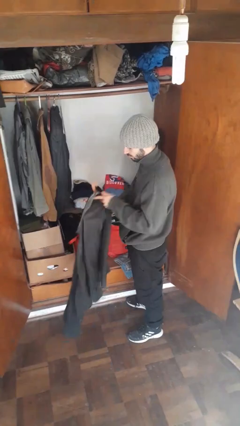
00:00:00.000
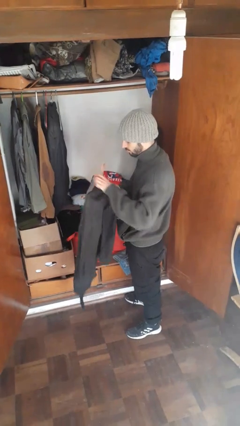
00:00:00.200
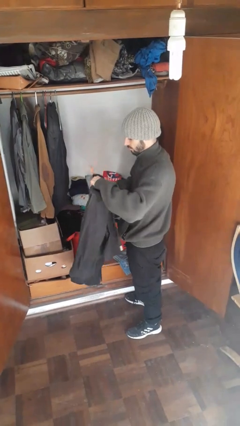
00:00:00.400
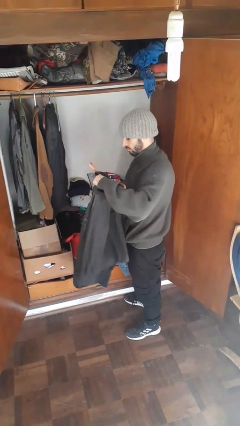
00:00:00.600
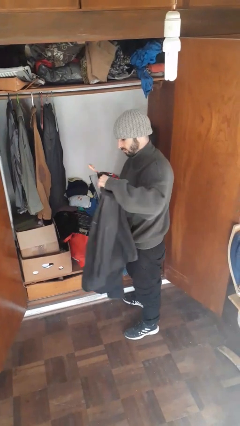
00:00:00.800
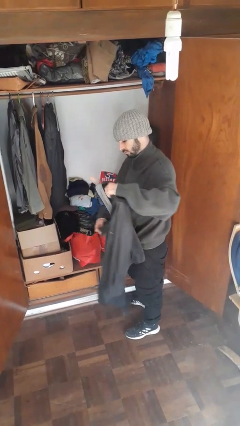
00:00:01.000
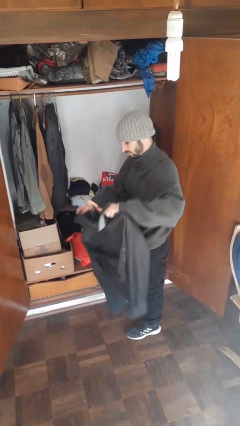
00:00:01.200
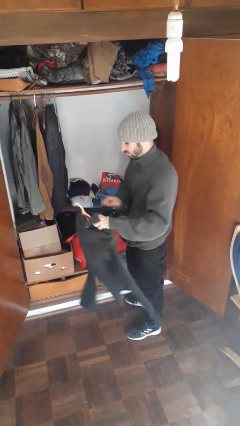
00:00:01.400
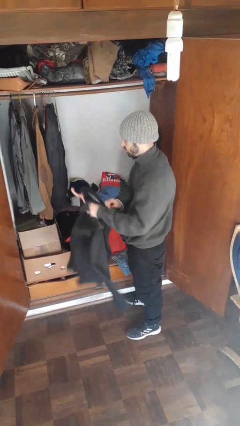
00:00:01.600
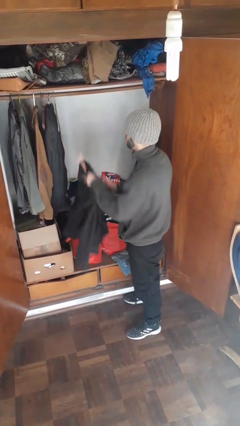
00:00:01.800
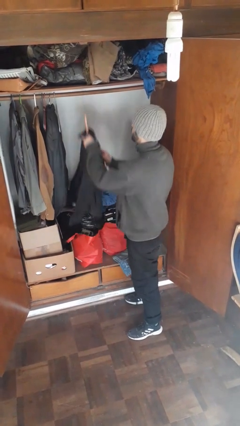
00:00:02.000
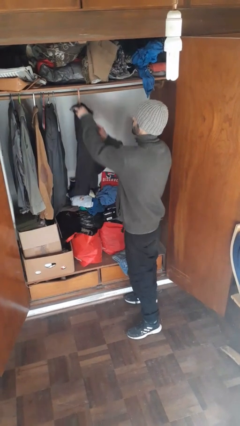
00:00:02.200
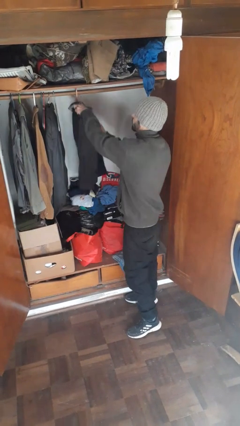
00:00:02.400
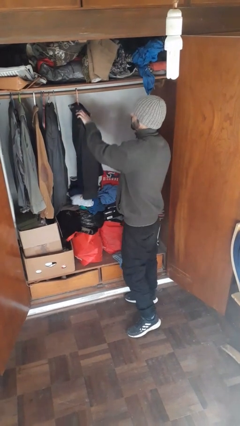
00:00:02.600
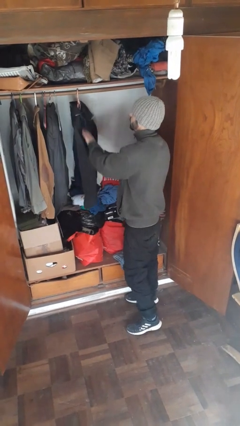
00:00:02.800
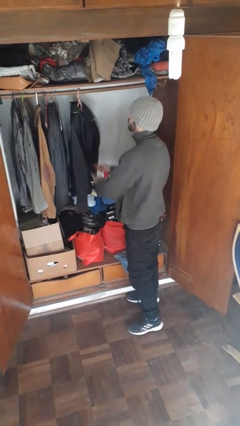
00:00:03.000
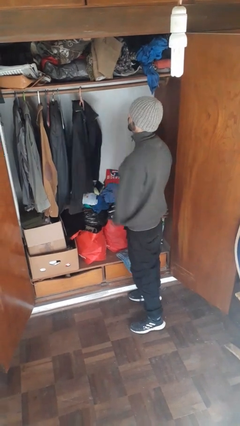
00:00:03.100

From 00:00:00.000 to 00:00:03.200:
person puts clothes into closet

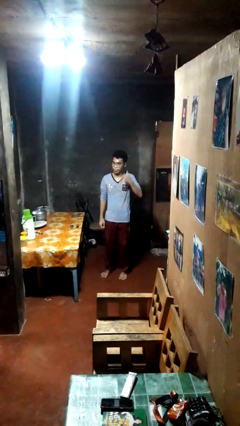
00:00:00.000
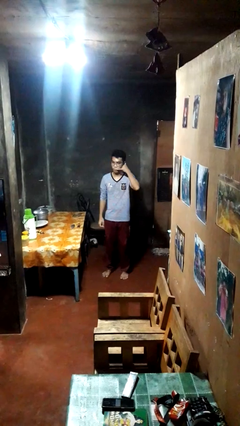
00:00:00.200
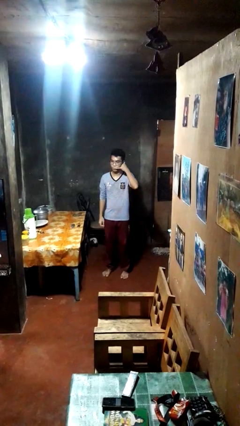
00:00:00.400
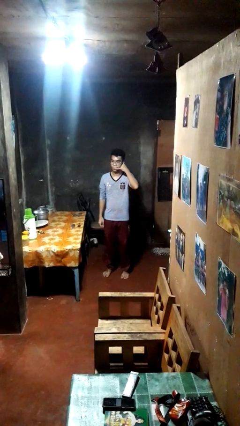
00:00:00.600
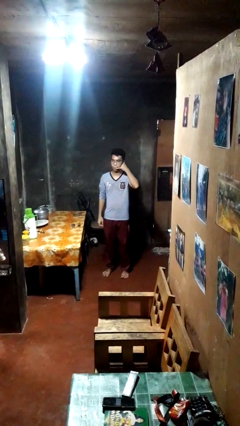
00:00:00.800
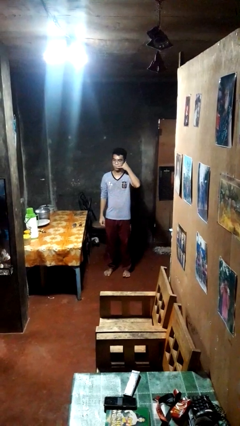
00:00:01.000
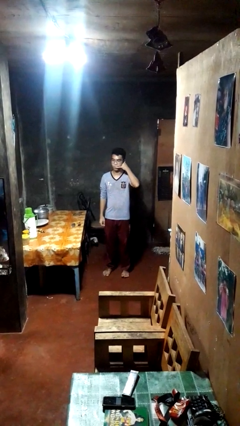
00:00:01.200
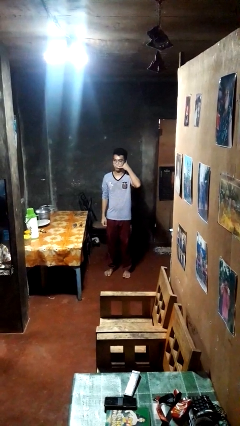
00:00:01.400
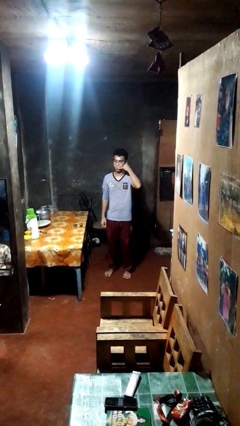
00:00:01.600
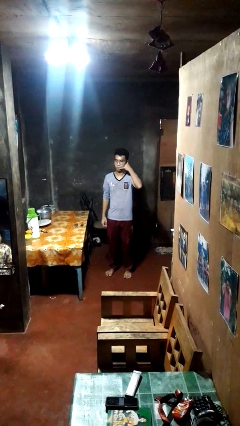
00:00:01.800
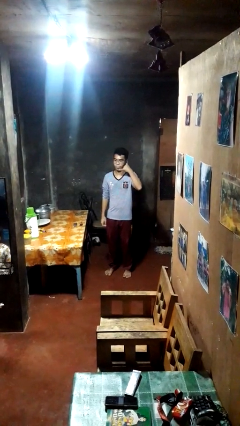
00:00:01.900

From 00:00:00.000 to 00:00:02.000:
person gestures call me

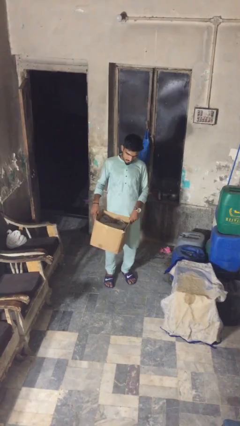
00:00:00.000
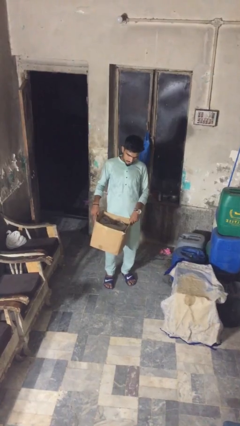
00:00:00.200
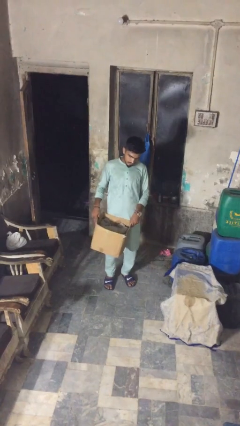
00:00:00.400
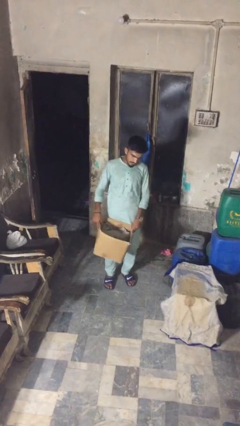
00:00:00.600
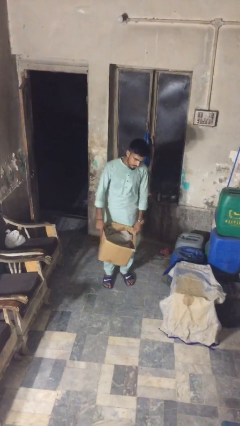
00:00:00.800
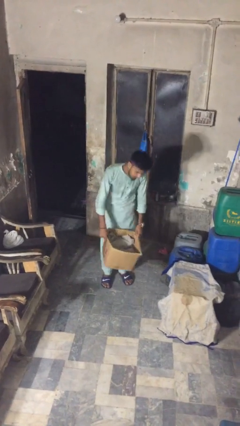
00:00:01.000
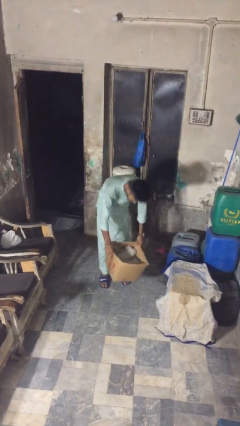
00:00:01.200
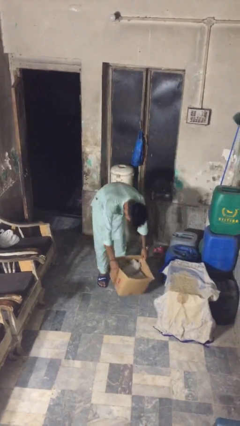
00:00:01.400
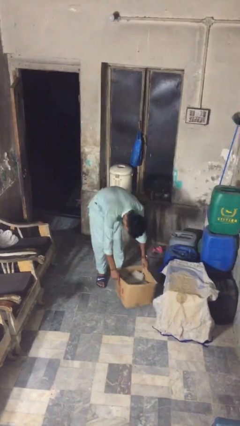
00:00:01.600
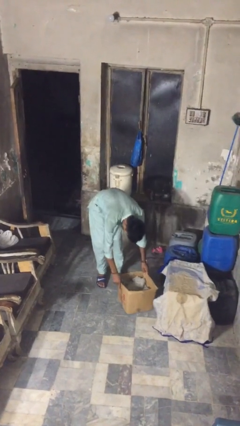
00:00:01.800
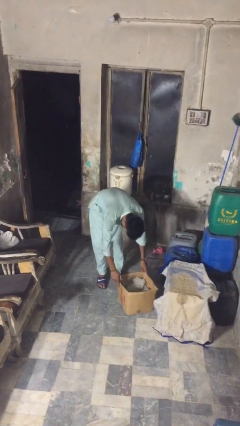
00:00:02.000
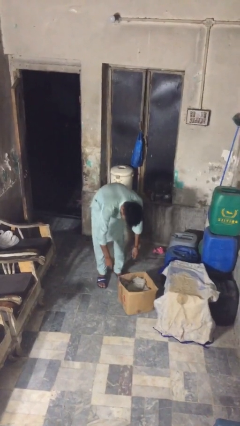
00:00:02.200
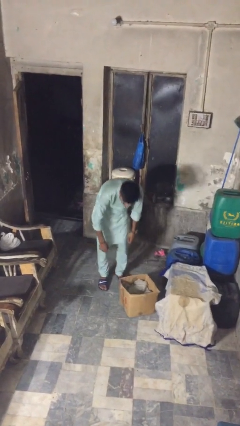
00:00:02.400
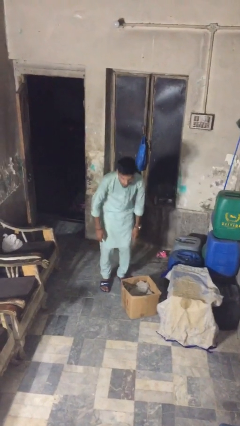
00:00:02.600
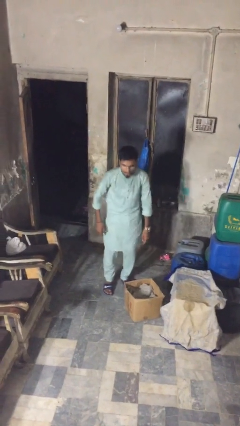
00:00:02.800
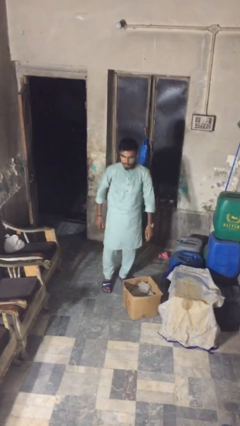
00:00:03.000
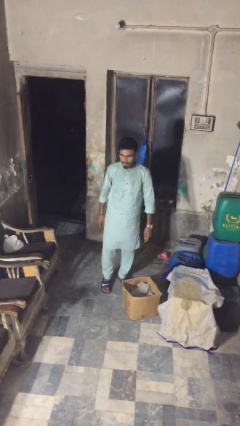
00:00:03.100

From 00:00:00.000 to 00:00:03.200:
person puts down object on floor

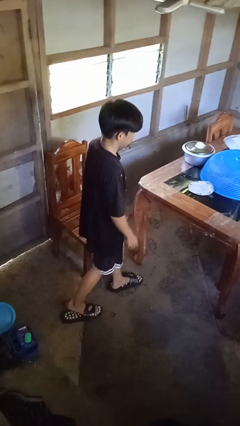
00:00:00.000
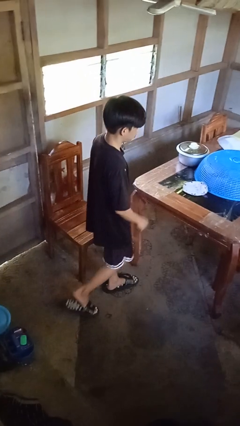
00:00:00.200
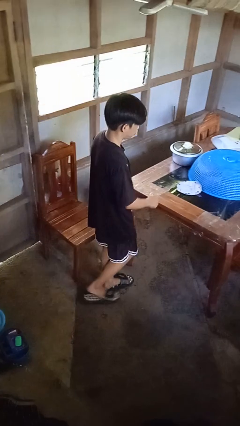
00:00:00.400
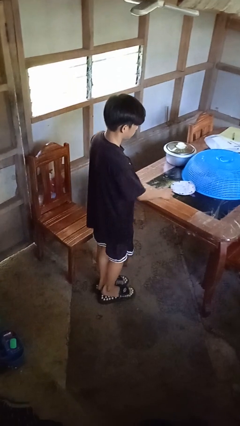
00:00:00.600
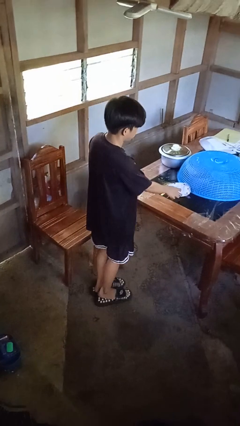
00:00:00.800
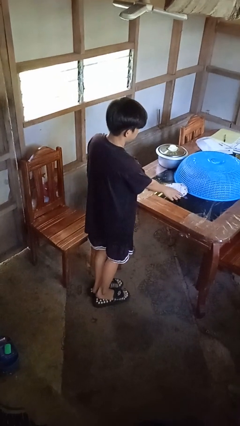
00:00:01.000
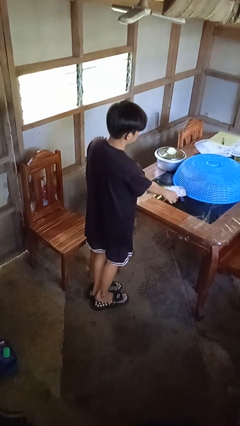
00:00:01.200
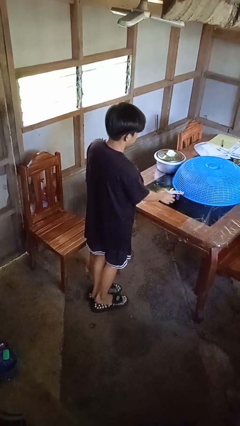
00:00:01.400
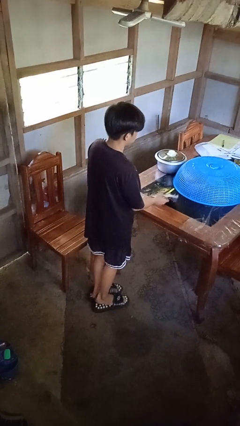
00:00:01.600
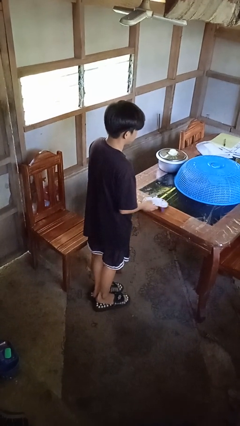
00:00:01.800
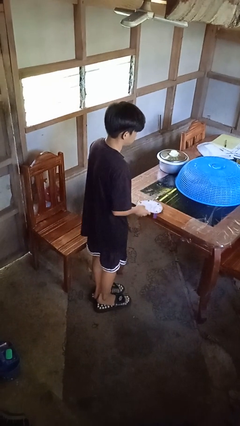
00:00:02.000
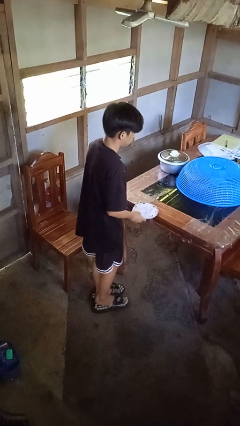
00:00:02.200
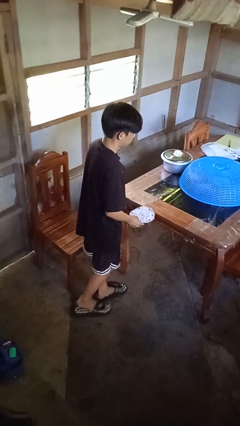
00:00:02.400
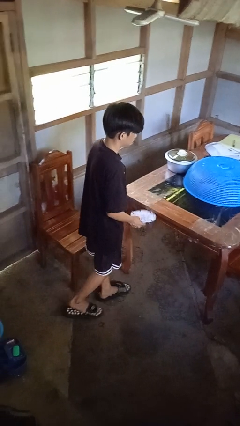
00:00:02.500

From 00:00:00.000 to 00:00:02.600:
person picks up object from table

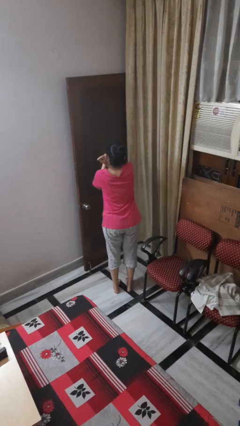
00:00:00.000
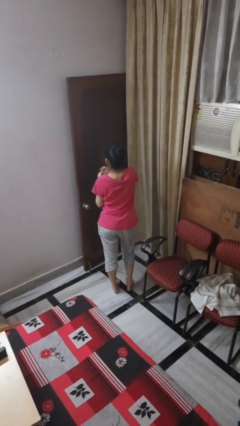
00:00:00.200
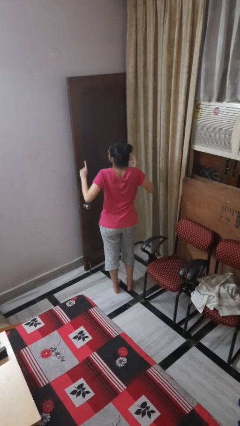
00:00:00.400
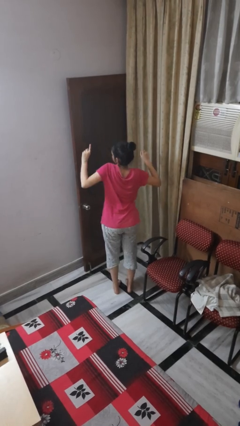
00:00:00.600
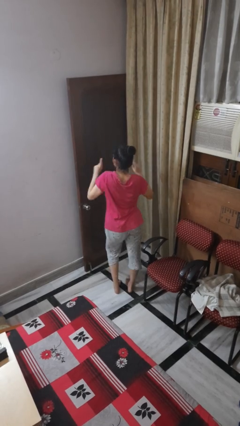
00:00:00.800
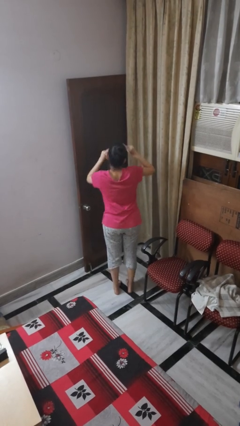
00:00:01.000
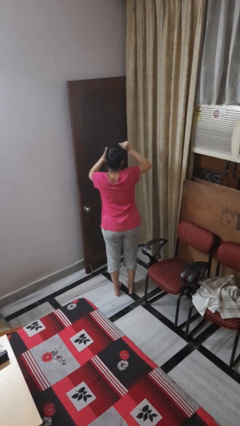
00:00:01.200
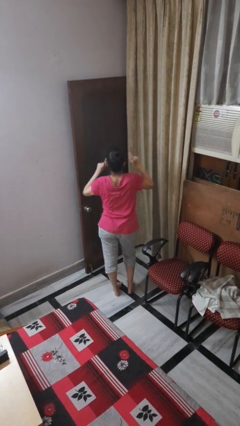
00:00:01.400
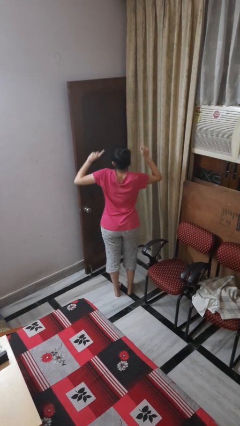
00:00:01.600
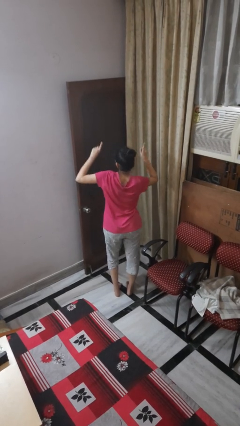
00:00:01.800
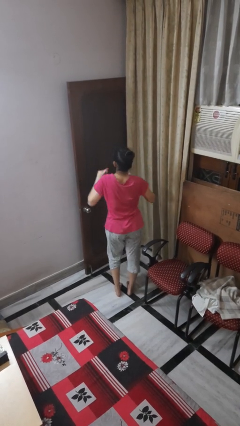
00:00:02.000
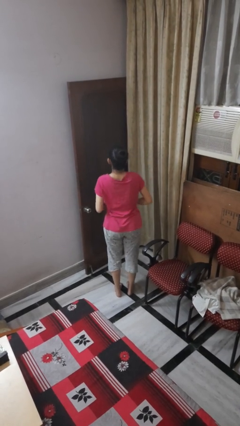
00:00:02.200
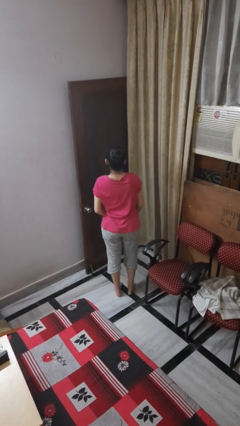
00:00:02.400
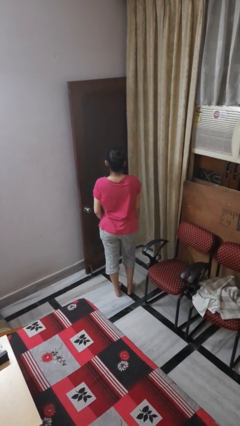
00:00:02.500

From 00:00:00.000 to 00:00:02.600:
person dances in place

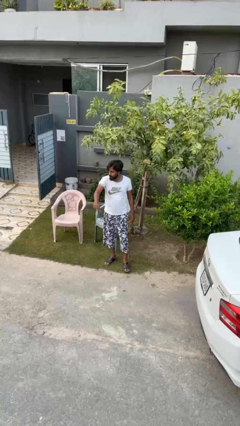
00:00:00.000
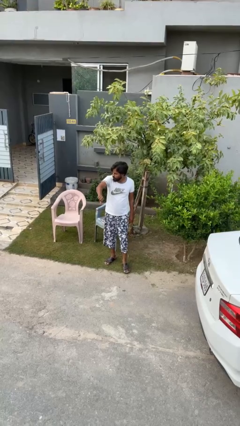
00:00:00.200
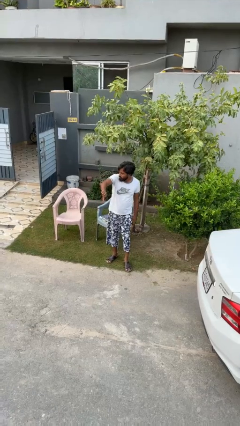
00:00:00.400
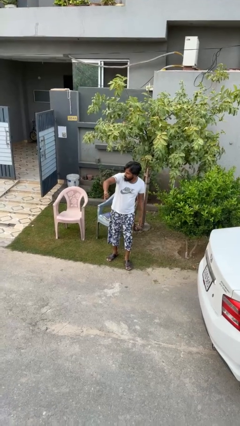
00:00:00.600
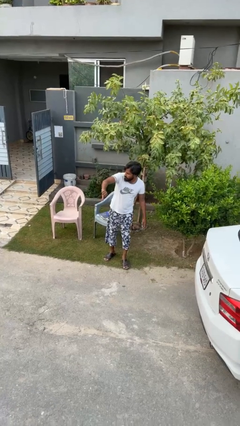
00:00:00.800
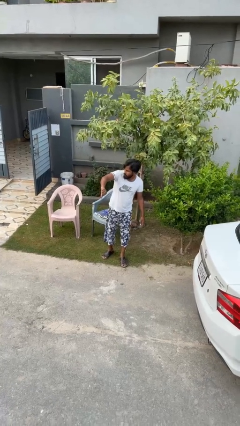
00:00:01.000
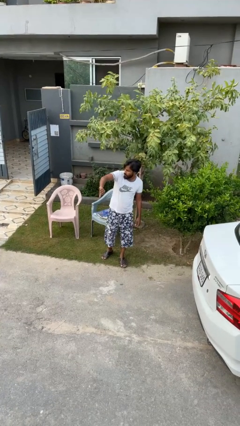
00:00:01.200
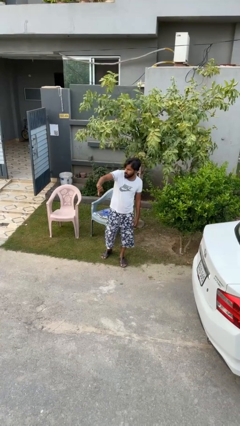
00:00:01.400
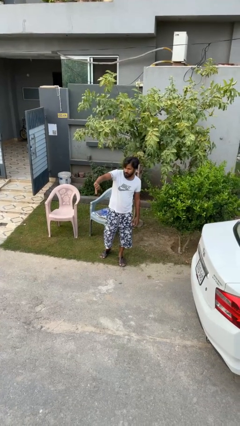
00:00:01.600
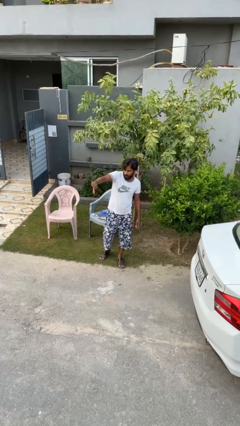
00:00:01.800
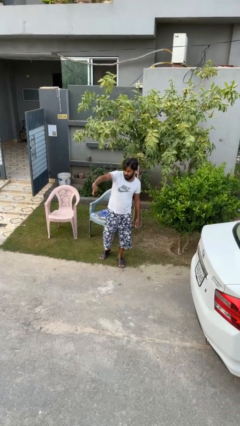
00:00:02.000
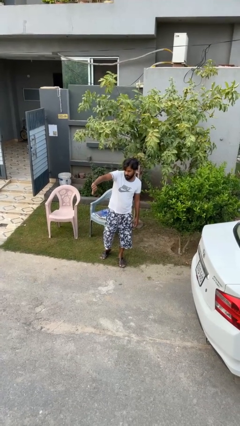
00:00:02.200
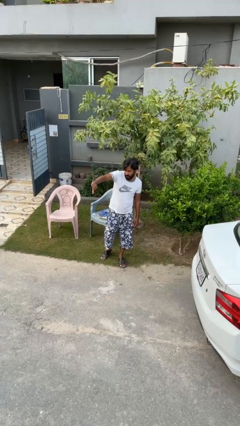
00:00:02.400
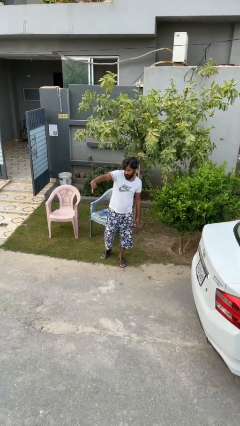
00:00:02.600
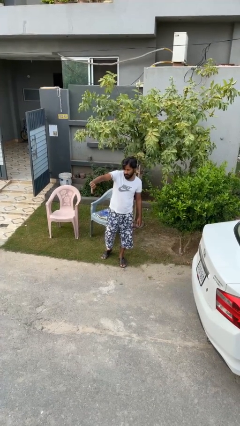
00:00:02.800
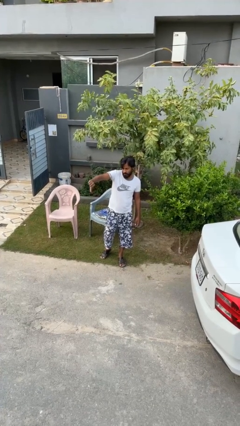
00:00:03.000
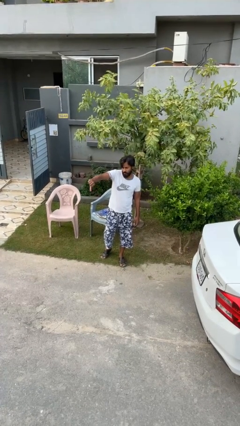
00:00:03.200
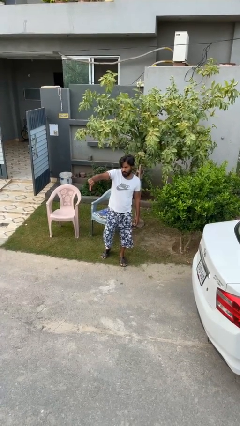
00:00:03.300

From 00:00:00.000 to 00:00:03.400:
person gestures thumbs down

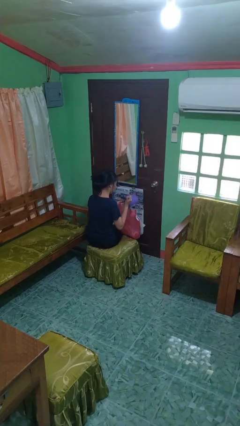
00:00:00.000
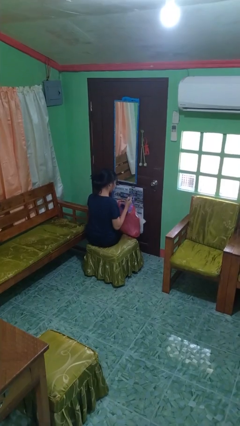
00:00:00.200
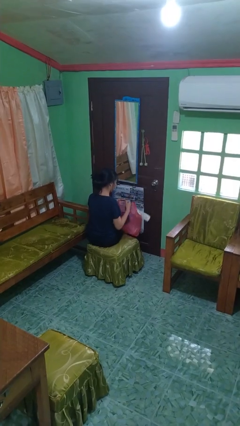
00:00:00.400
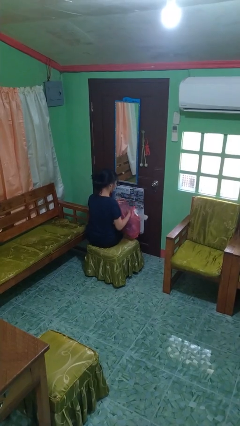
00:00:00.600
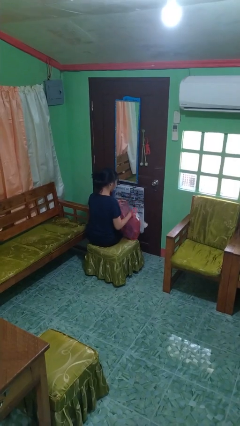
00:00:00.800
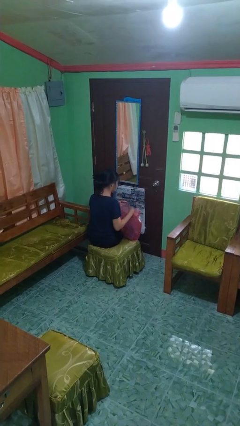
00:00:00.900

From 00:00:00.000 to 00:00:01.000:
person puts object into bag
